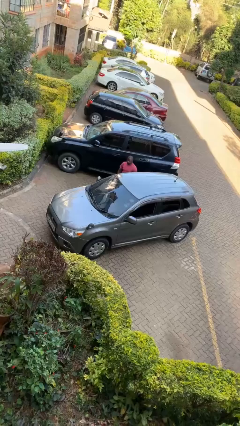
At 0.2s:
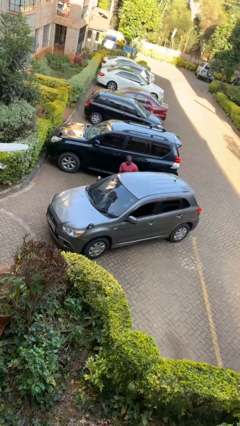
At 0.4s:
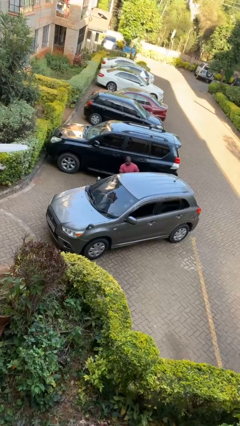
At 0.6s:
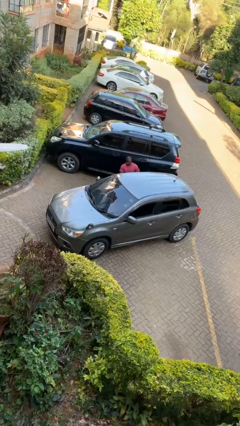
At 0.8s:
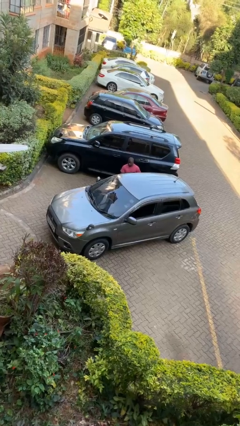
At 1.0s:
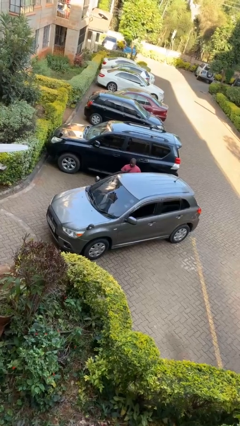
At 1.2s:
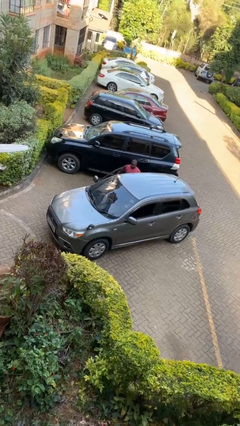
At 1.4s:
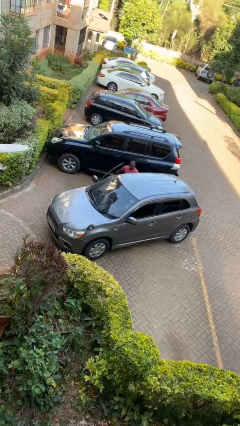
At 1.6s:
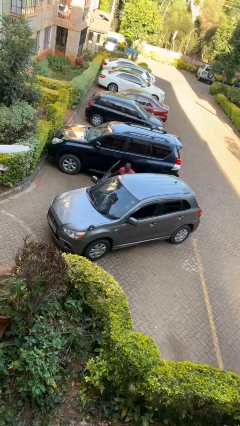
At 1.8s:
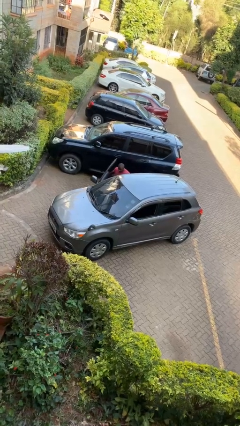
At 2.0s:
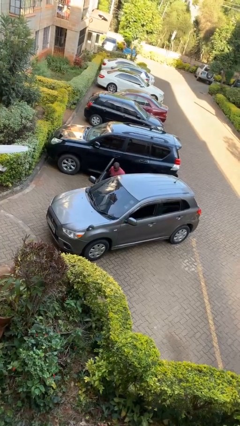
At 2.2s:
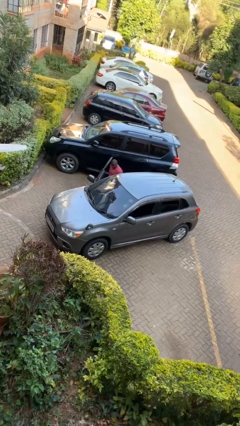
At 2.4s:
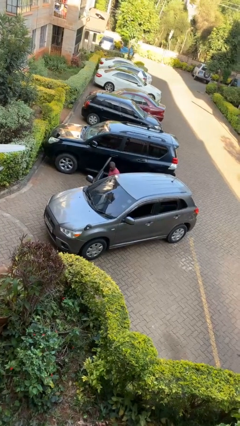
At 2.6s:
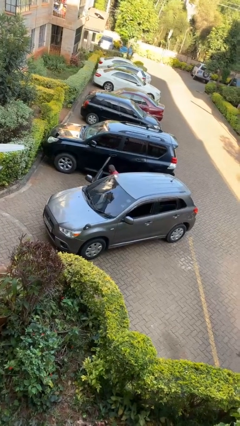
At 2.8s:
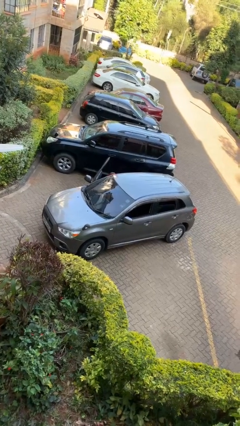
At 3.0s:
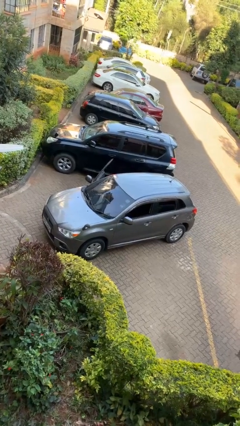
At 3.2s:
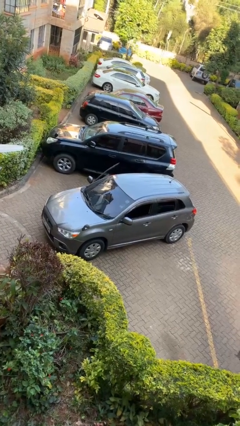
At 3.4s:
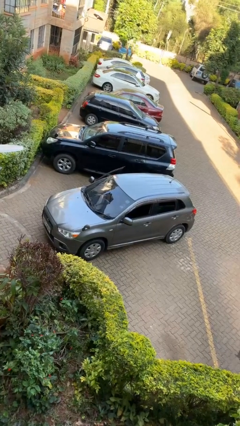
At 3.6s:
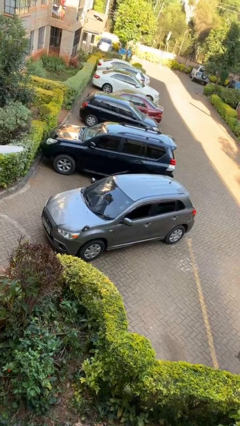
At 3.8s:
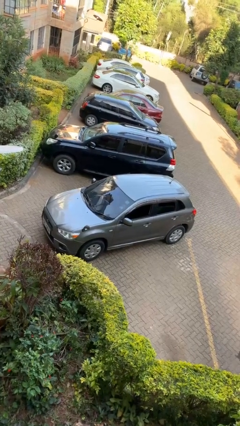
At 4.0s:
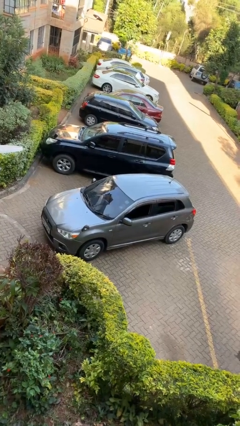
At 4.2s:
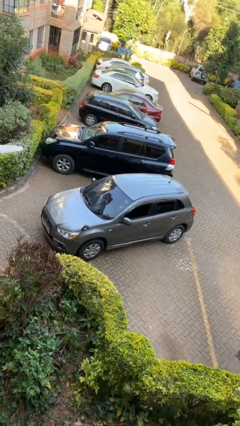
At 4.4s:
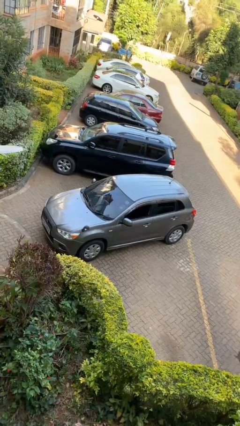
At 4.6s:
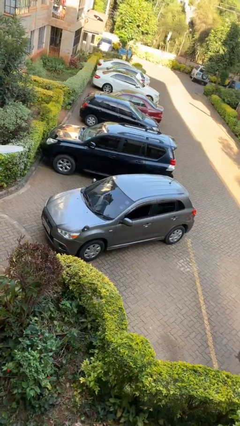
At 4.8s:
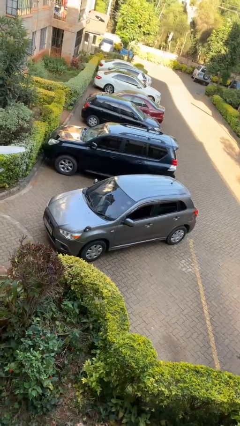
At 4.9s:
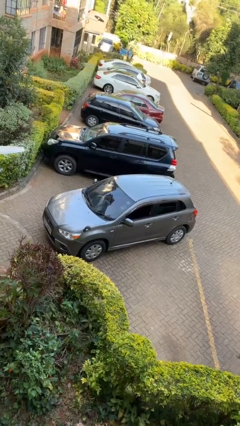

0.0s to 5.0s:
car picks up person

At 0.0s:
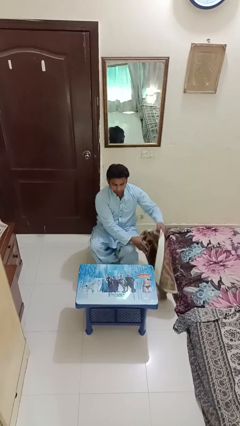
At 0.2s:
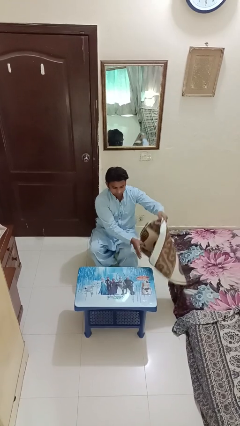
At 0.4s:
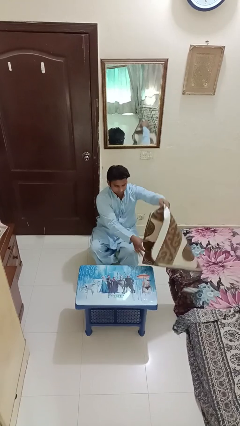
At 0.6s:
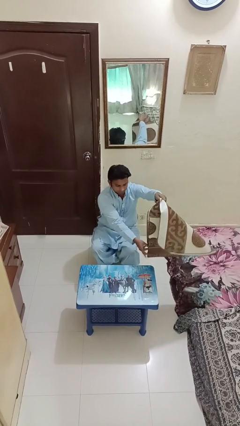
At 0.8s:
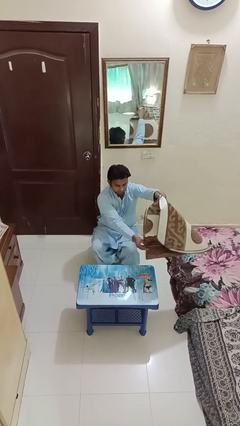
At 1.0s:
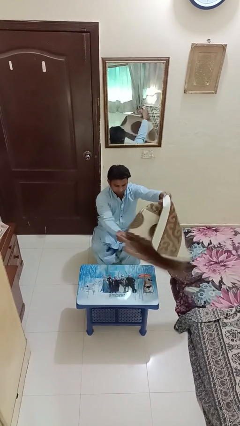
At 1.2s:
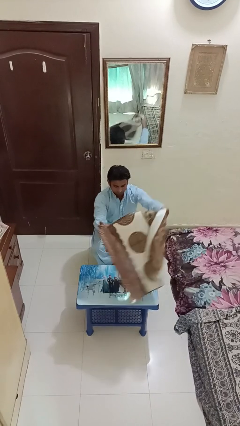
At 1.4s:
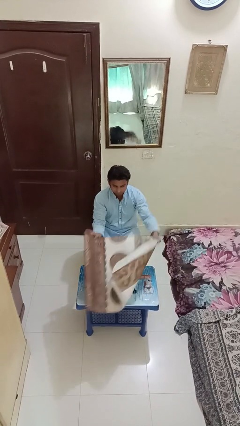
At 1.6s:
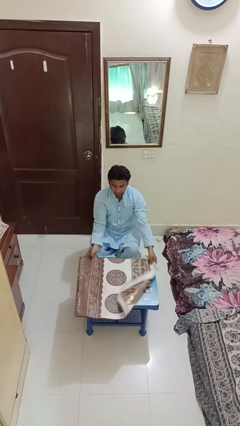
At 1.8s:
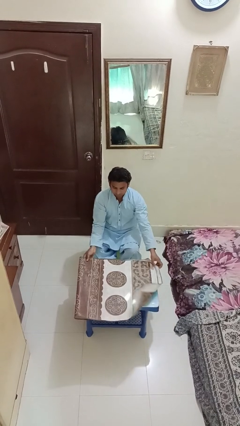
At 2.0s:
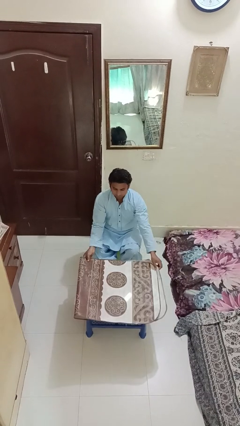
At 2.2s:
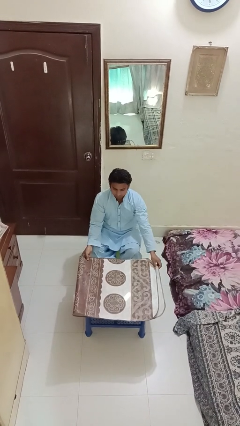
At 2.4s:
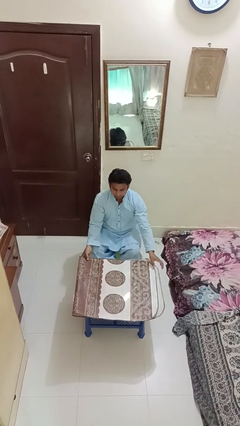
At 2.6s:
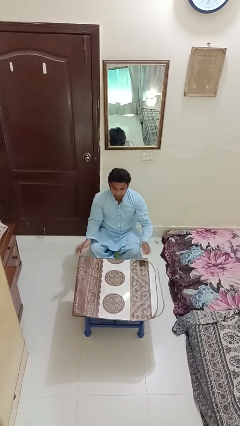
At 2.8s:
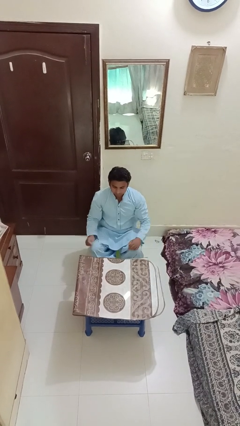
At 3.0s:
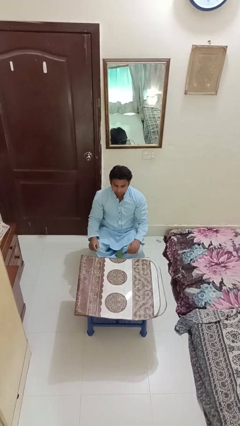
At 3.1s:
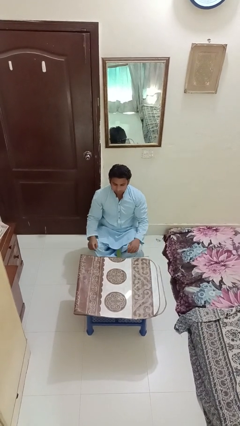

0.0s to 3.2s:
person spreads tablecloth

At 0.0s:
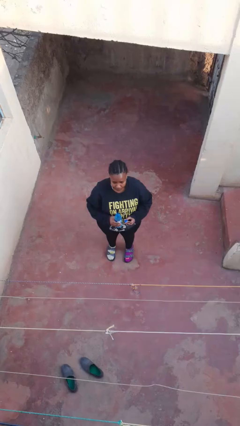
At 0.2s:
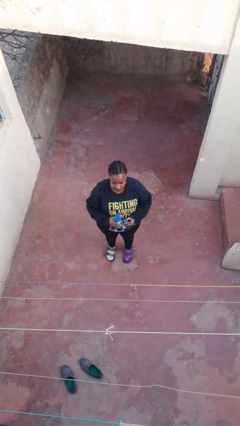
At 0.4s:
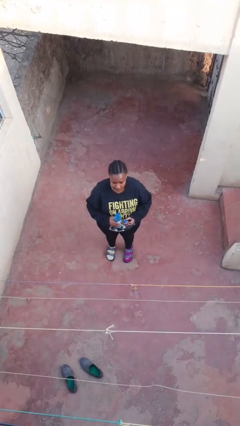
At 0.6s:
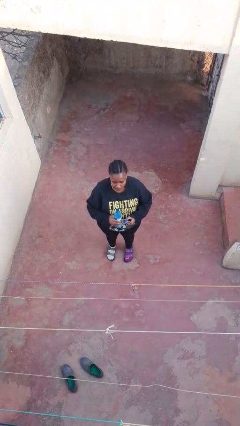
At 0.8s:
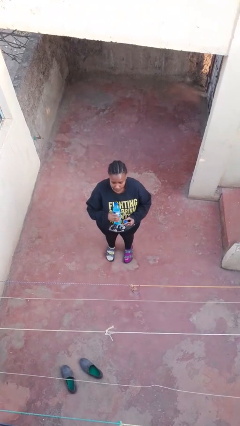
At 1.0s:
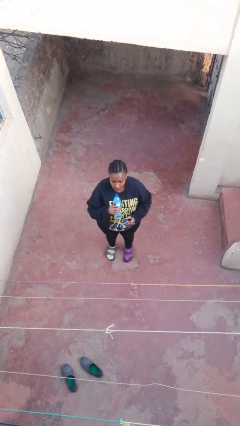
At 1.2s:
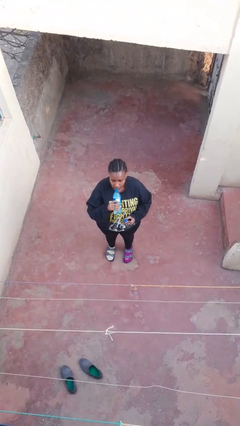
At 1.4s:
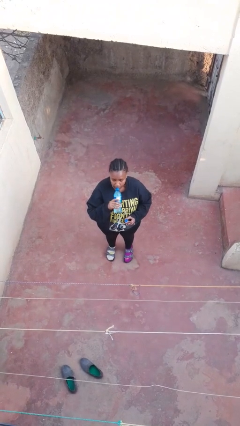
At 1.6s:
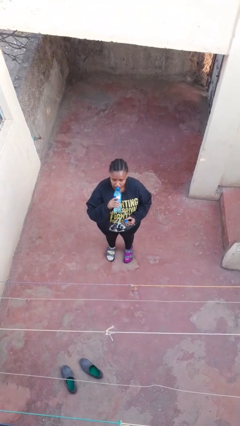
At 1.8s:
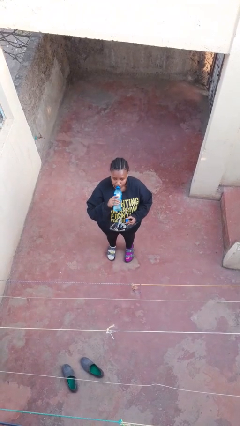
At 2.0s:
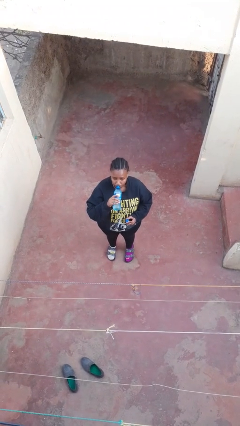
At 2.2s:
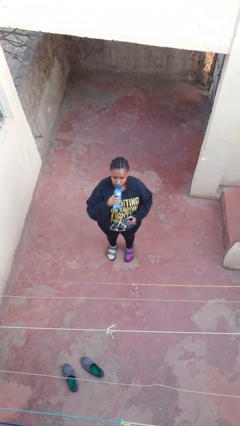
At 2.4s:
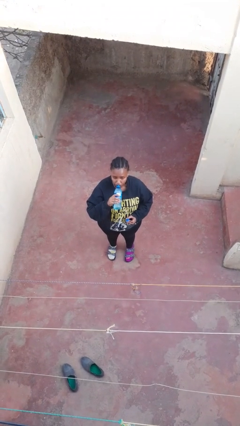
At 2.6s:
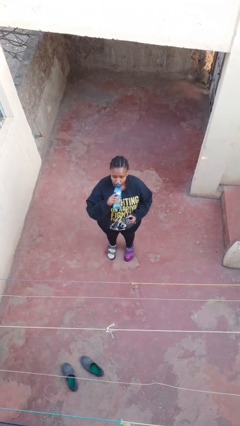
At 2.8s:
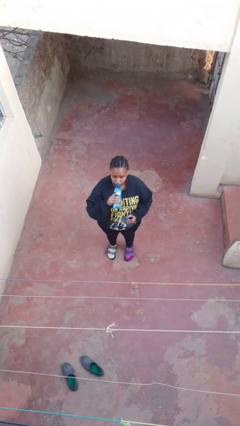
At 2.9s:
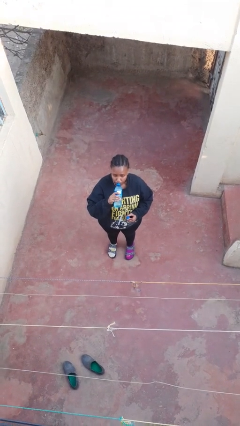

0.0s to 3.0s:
person drinks from bottle

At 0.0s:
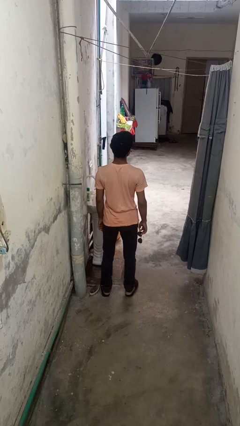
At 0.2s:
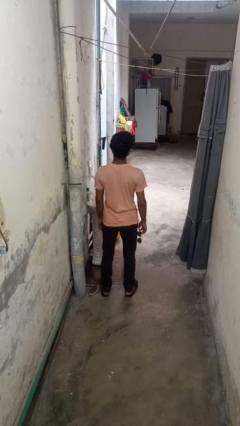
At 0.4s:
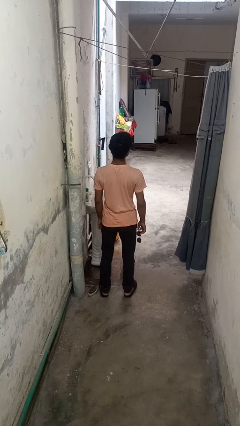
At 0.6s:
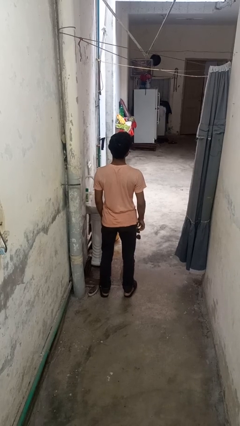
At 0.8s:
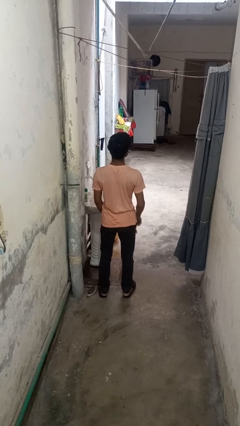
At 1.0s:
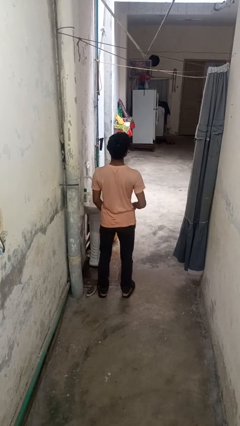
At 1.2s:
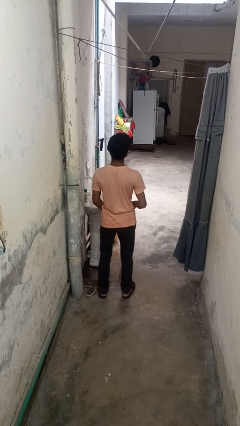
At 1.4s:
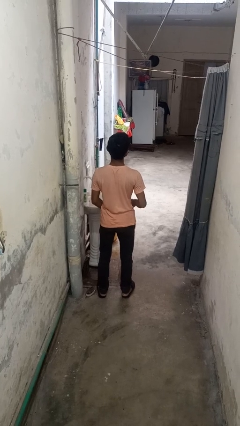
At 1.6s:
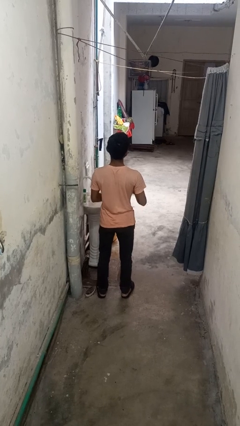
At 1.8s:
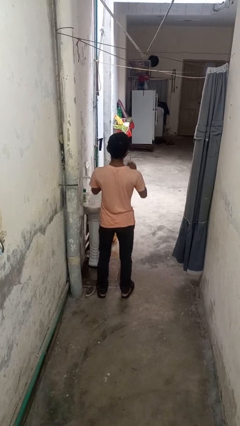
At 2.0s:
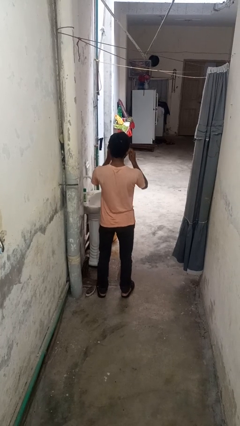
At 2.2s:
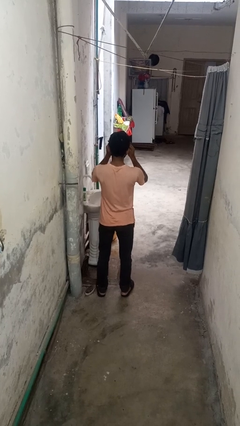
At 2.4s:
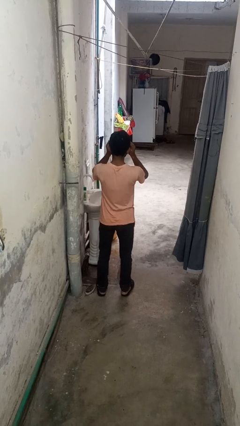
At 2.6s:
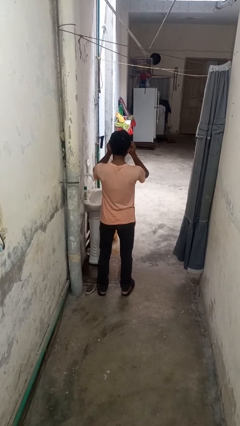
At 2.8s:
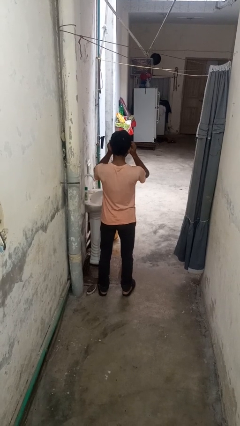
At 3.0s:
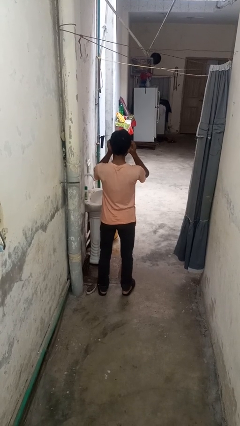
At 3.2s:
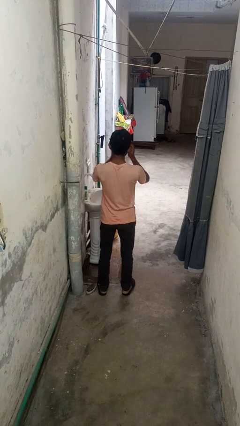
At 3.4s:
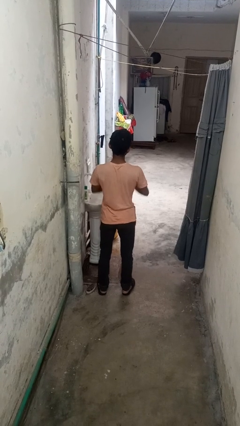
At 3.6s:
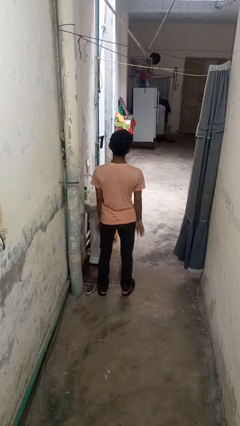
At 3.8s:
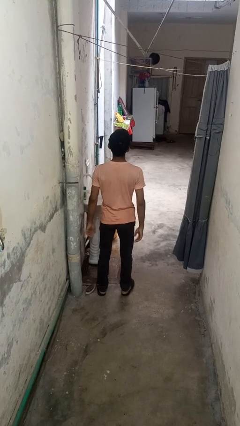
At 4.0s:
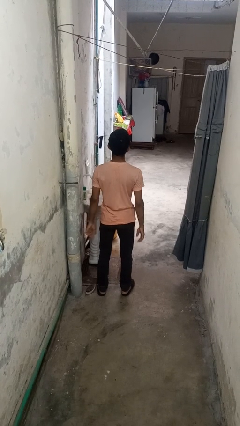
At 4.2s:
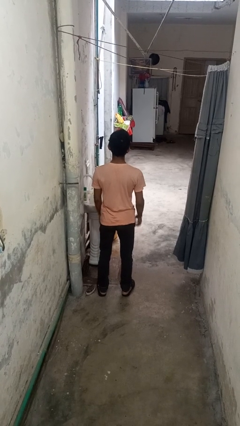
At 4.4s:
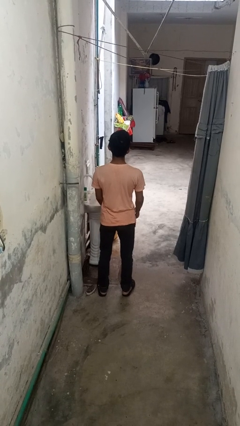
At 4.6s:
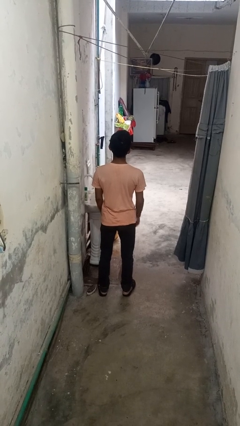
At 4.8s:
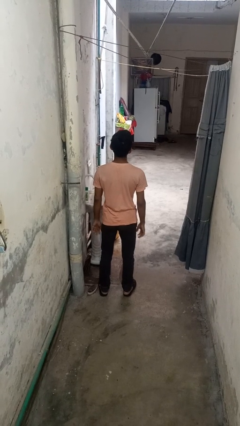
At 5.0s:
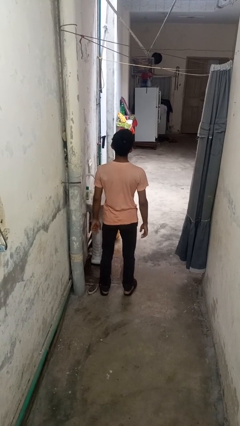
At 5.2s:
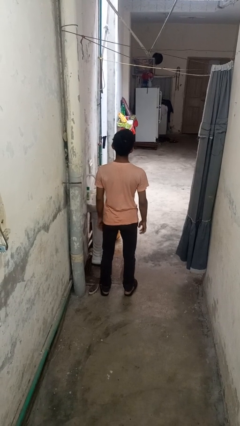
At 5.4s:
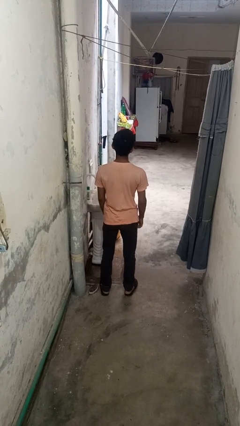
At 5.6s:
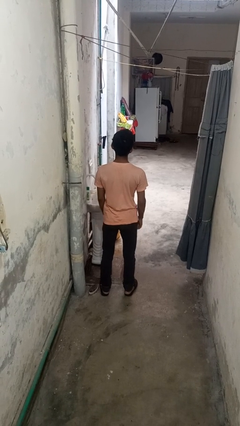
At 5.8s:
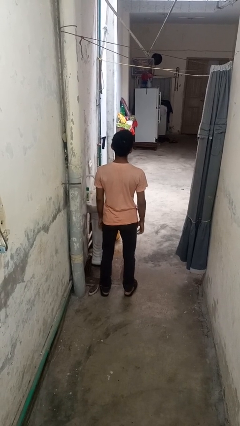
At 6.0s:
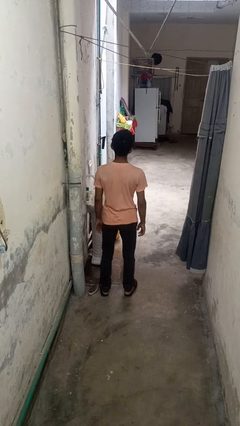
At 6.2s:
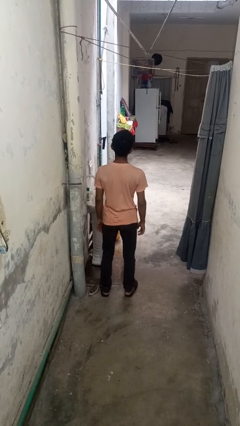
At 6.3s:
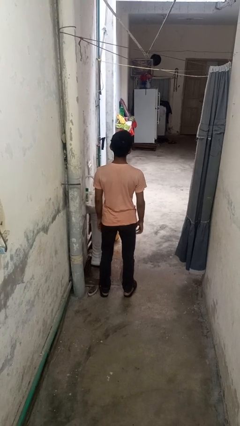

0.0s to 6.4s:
person puts on sunglasses
